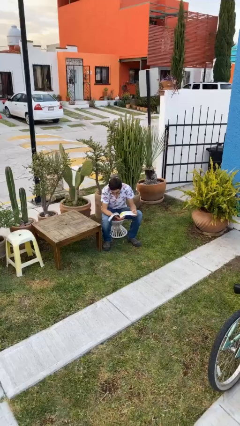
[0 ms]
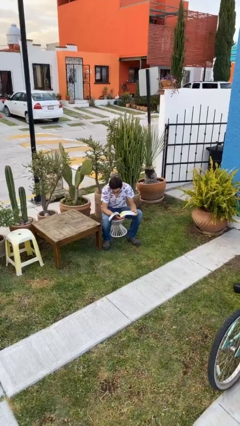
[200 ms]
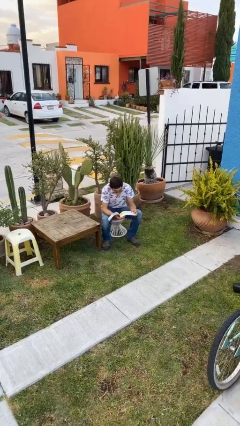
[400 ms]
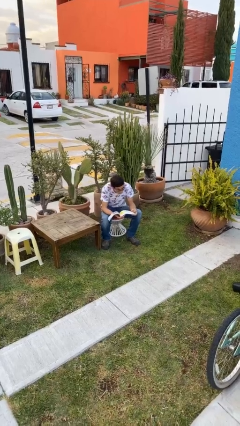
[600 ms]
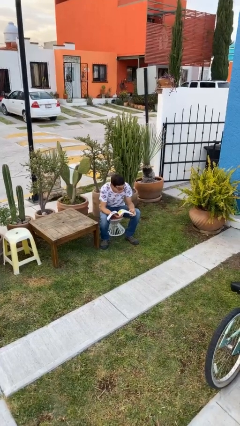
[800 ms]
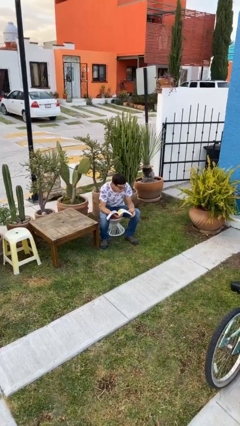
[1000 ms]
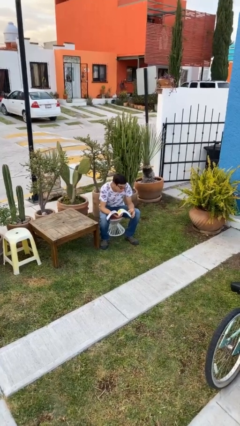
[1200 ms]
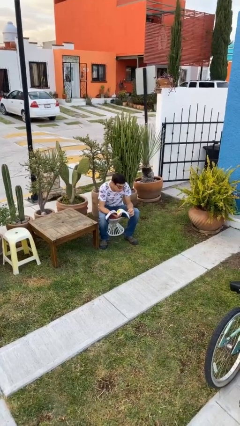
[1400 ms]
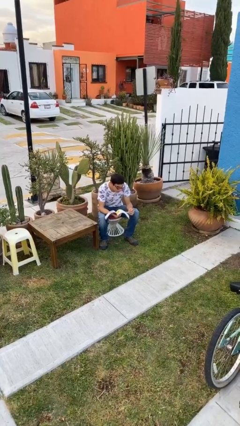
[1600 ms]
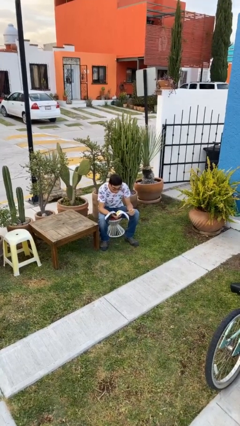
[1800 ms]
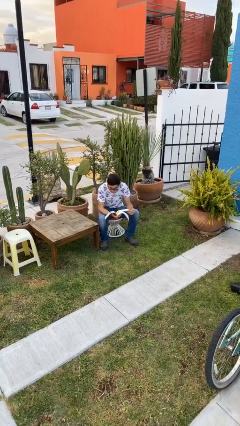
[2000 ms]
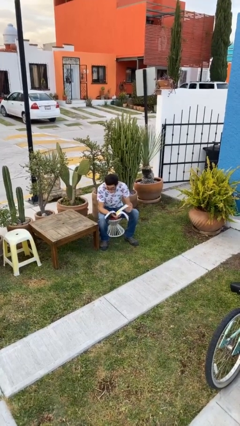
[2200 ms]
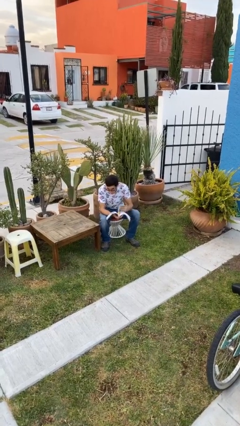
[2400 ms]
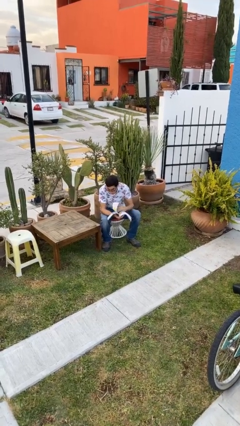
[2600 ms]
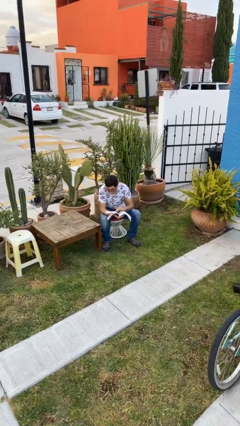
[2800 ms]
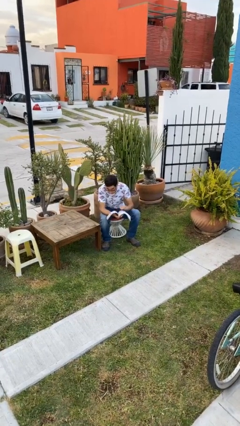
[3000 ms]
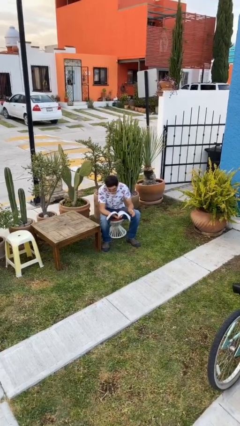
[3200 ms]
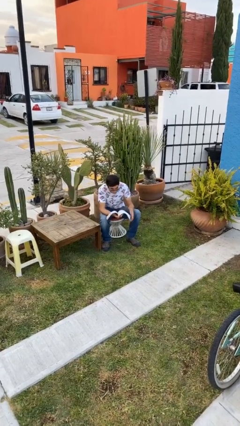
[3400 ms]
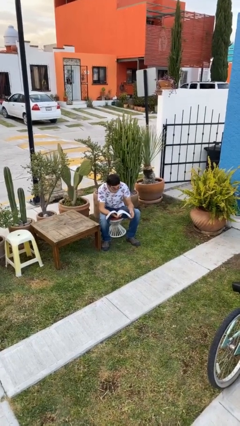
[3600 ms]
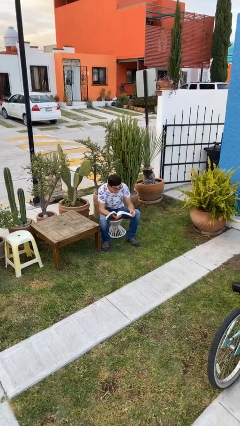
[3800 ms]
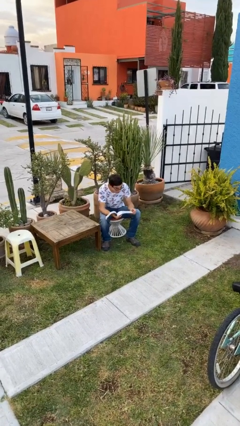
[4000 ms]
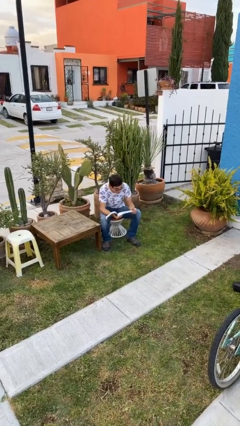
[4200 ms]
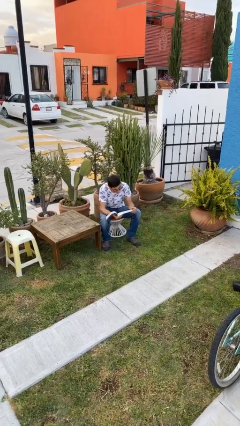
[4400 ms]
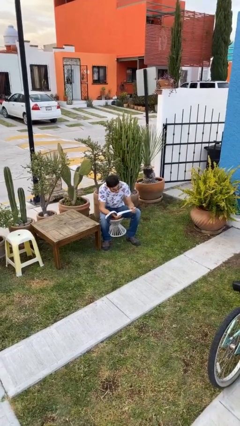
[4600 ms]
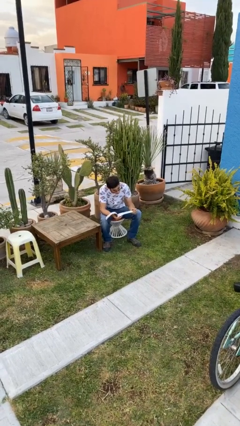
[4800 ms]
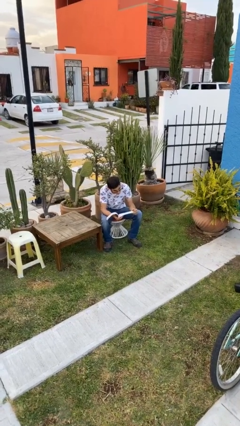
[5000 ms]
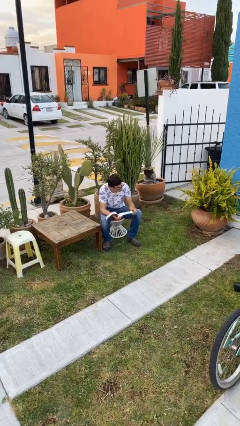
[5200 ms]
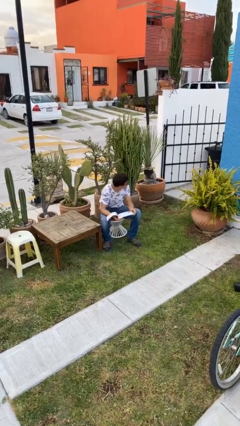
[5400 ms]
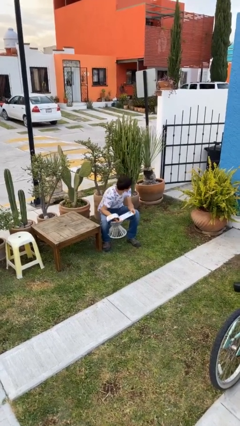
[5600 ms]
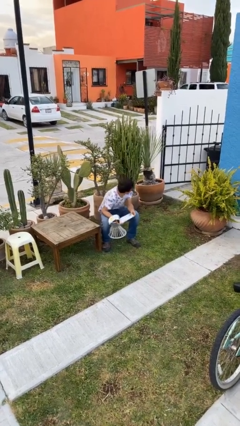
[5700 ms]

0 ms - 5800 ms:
person reads document

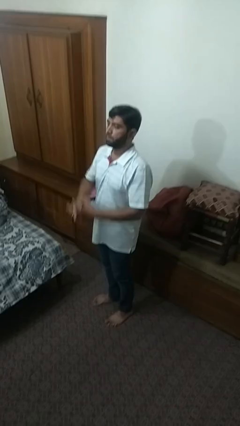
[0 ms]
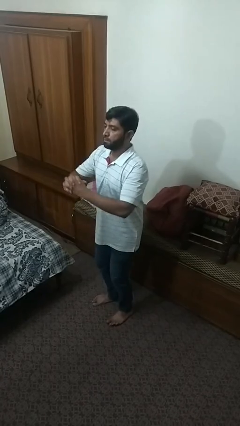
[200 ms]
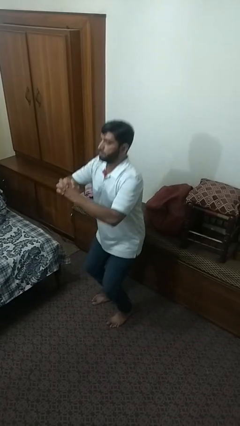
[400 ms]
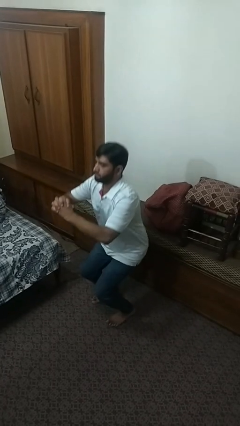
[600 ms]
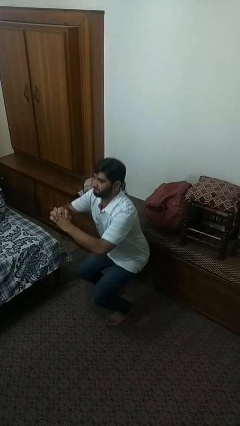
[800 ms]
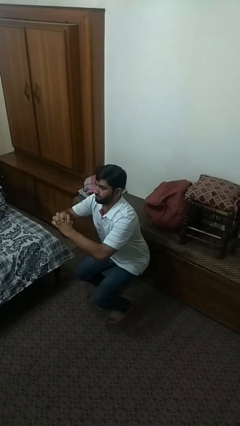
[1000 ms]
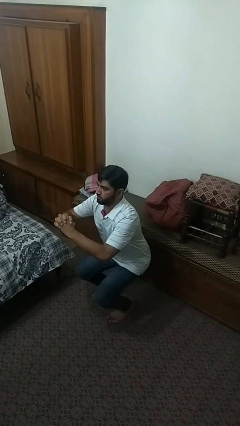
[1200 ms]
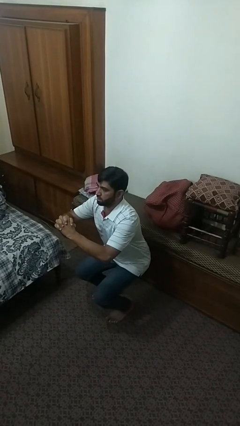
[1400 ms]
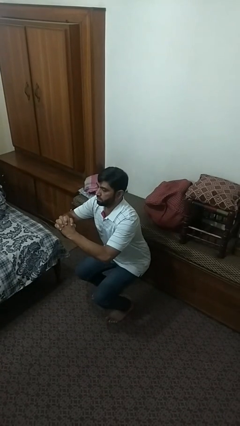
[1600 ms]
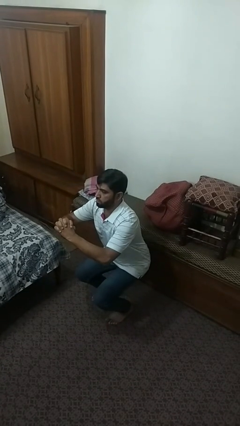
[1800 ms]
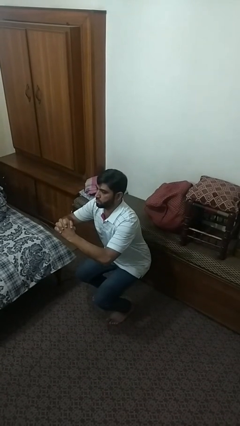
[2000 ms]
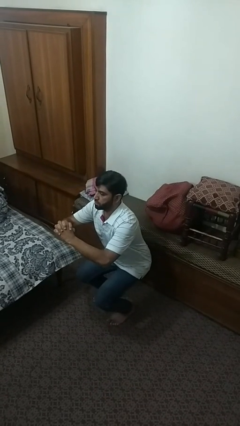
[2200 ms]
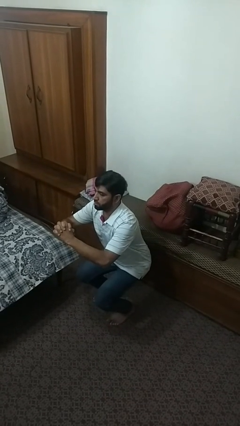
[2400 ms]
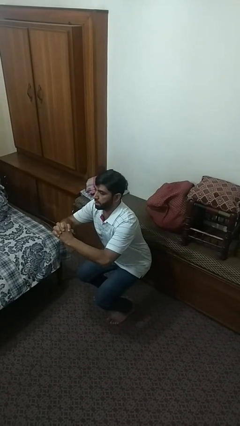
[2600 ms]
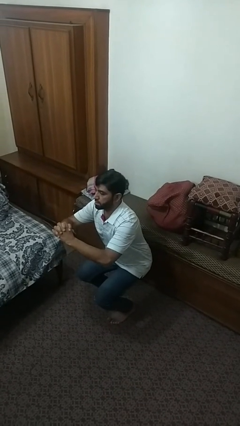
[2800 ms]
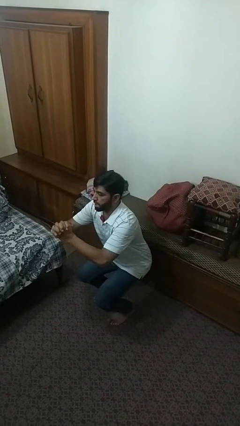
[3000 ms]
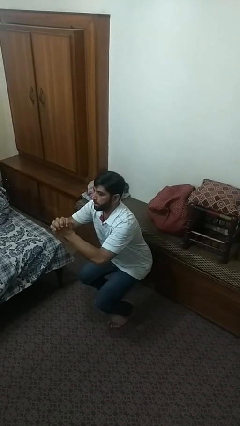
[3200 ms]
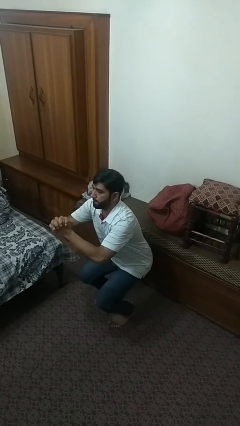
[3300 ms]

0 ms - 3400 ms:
person squats

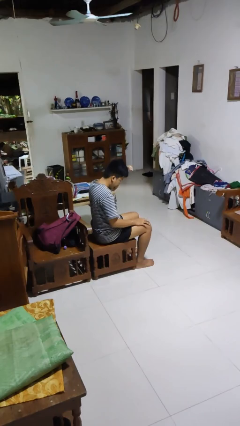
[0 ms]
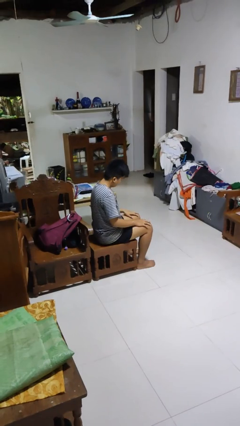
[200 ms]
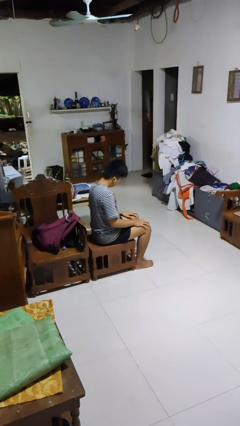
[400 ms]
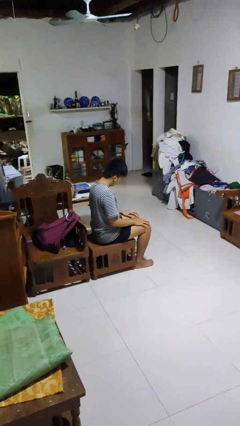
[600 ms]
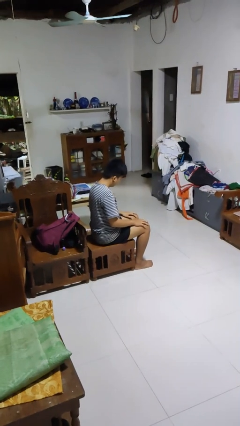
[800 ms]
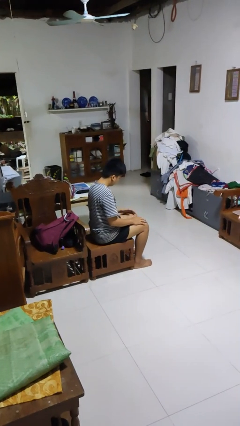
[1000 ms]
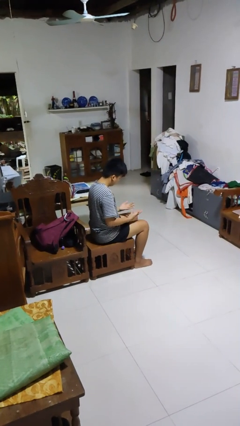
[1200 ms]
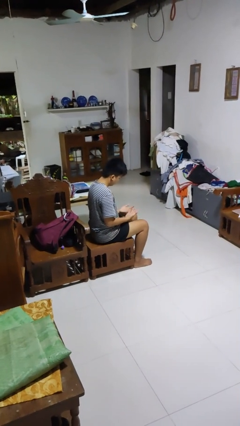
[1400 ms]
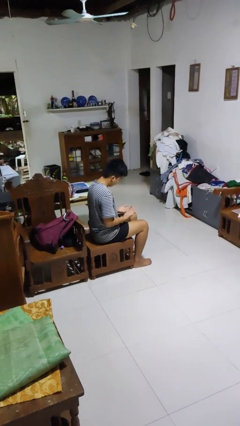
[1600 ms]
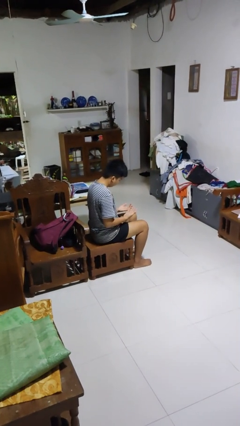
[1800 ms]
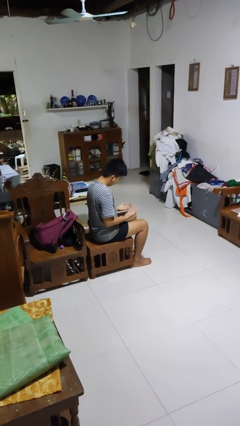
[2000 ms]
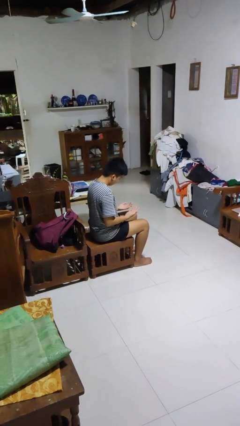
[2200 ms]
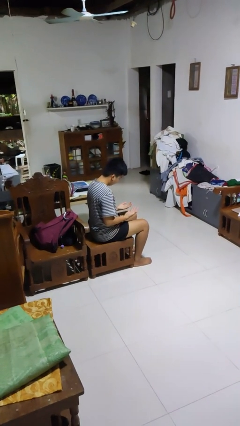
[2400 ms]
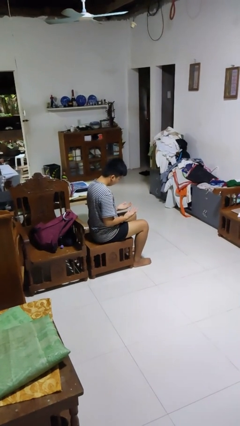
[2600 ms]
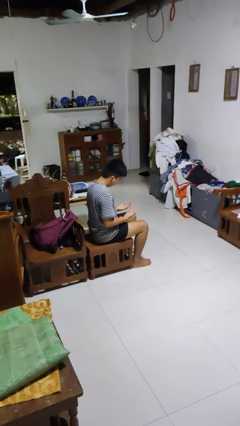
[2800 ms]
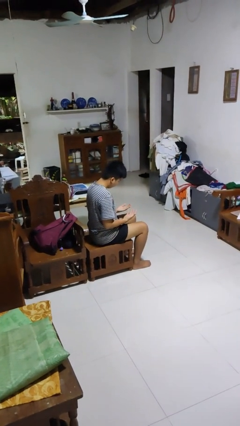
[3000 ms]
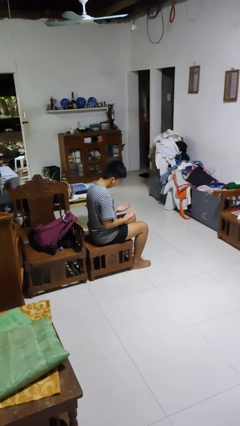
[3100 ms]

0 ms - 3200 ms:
person looks at hands in lap

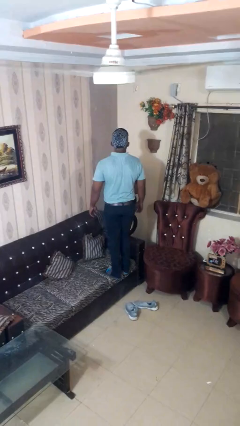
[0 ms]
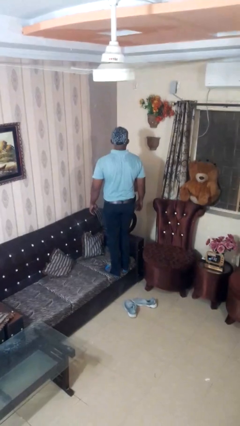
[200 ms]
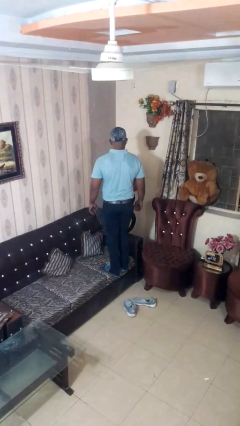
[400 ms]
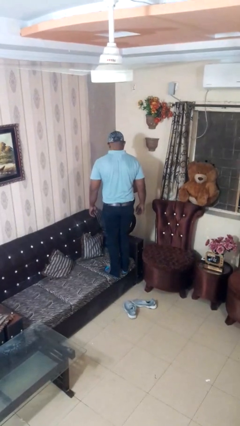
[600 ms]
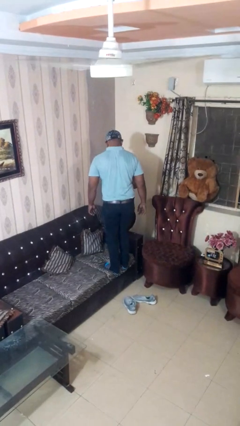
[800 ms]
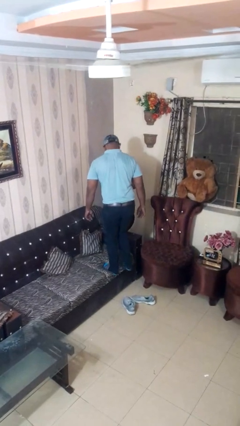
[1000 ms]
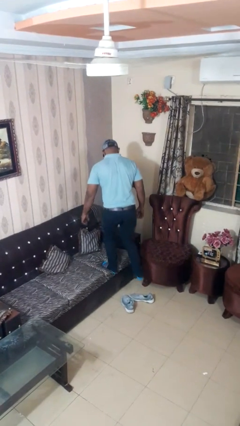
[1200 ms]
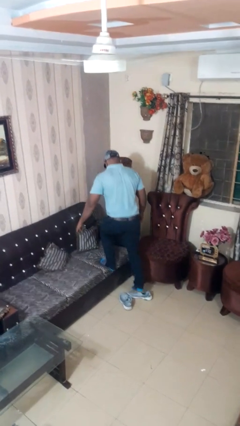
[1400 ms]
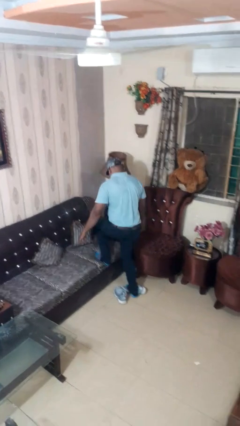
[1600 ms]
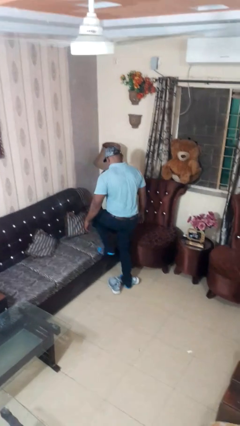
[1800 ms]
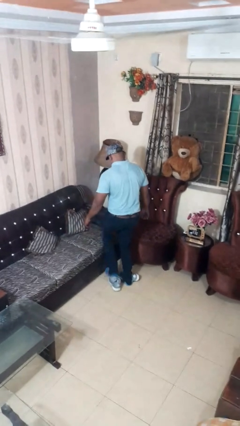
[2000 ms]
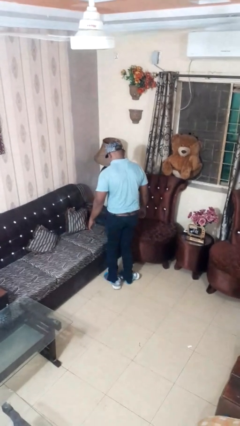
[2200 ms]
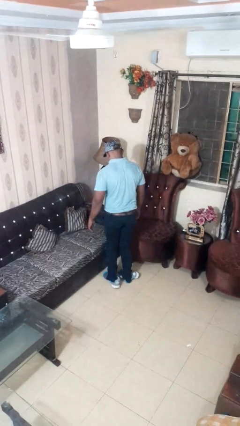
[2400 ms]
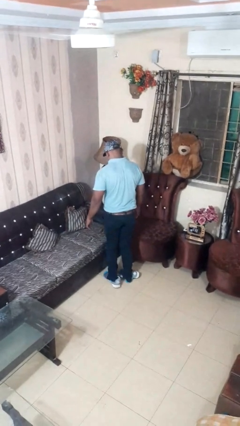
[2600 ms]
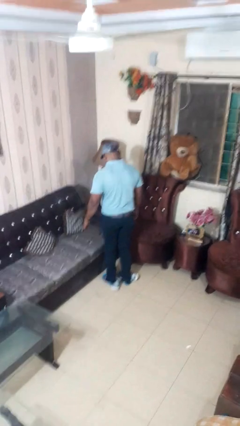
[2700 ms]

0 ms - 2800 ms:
person climbs off couch

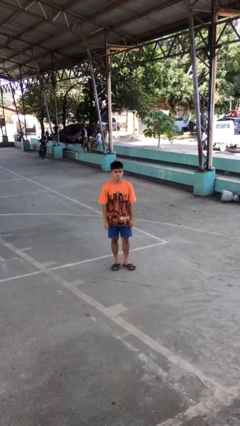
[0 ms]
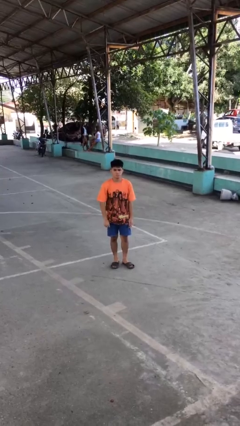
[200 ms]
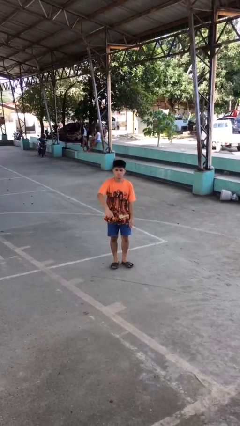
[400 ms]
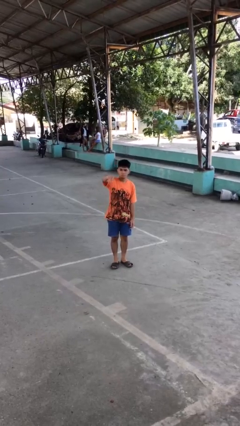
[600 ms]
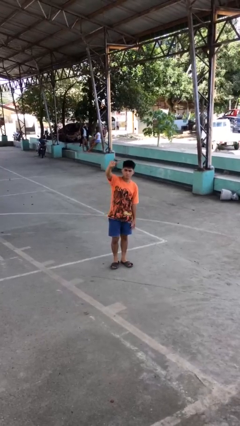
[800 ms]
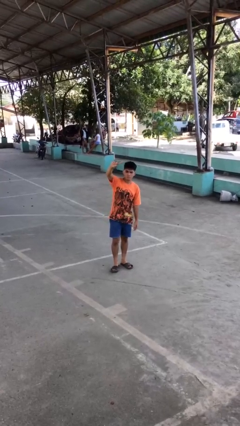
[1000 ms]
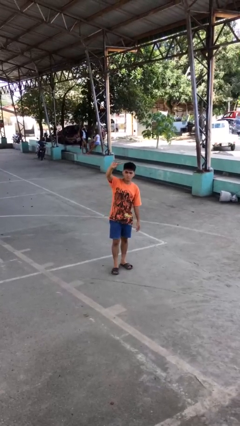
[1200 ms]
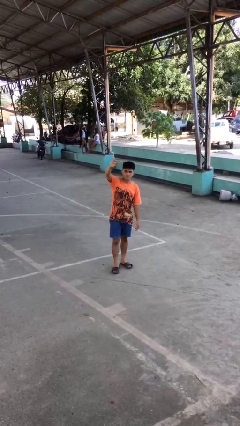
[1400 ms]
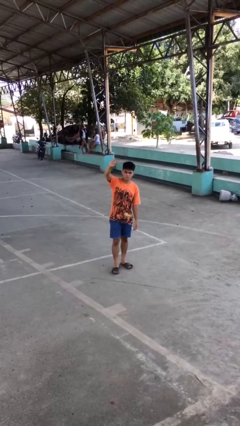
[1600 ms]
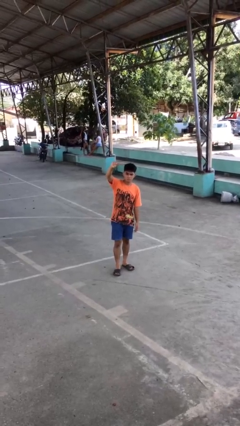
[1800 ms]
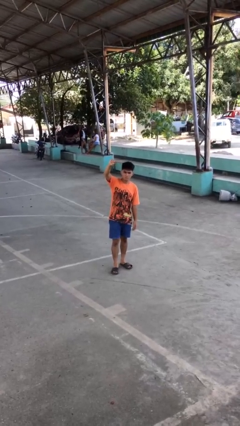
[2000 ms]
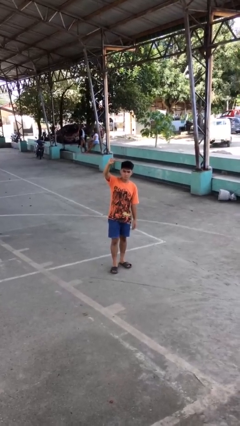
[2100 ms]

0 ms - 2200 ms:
person gestures swipe up

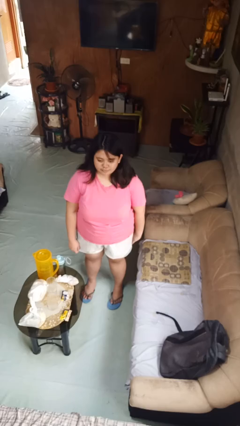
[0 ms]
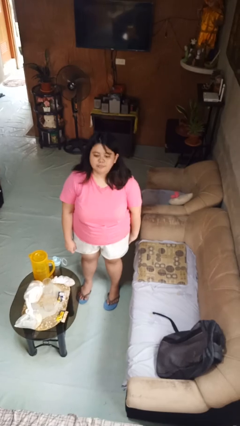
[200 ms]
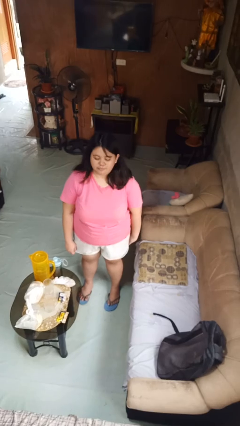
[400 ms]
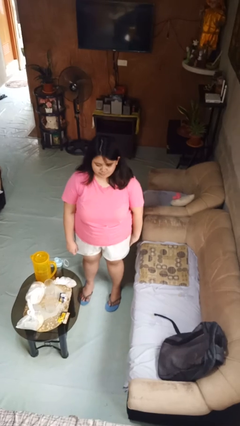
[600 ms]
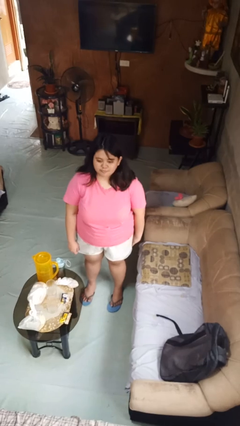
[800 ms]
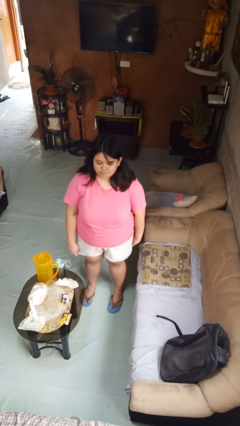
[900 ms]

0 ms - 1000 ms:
person nods head
